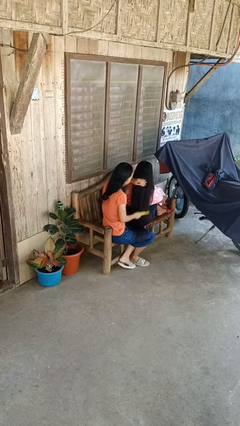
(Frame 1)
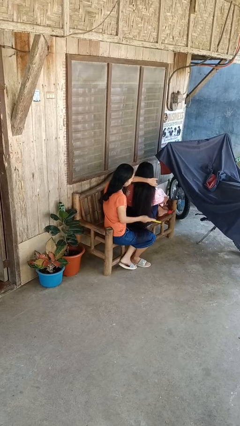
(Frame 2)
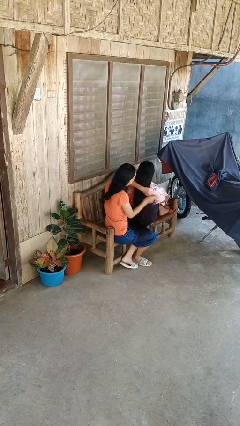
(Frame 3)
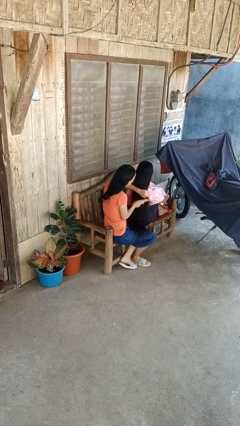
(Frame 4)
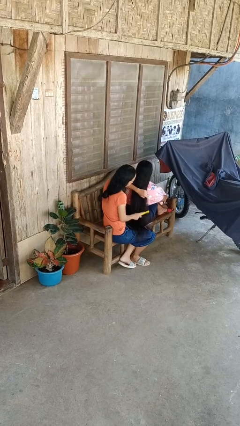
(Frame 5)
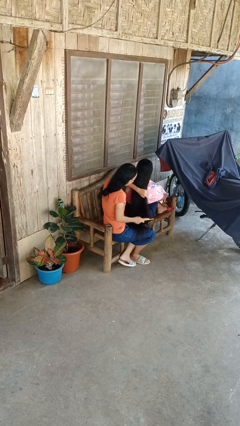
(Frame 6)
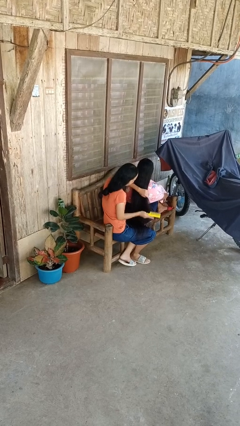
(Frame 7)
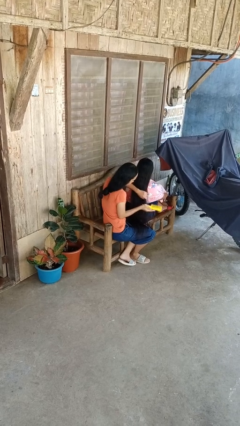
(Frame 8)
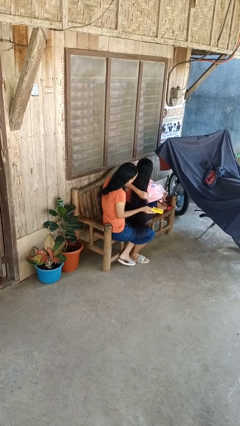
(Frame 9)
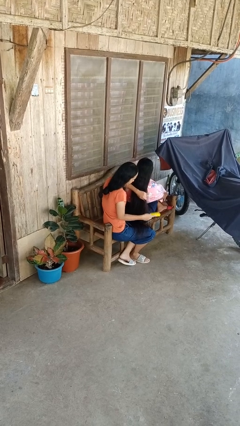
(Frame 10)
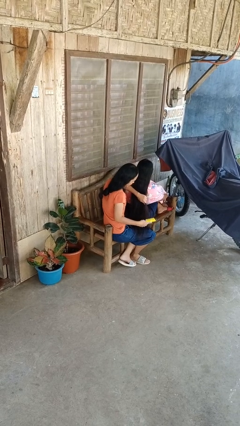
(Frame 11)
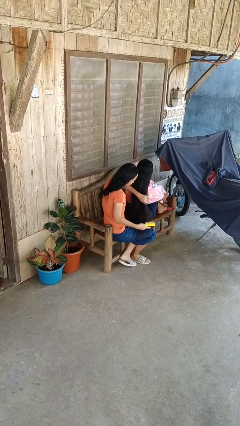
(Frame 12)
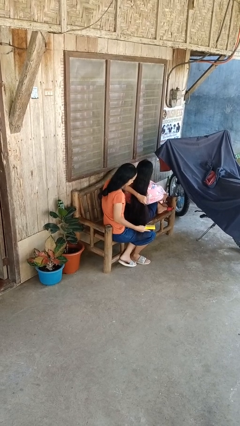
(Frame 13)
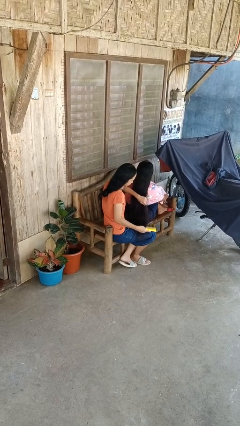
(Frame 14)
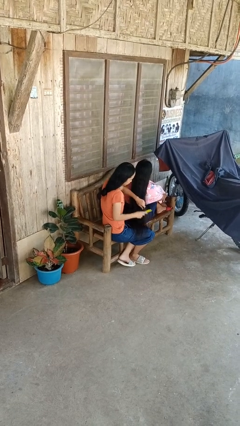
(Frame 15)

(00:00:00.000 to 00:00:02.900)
person brushes hair of person

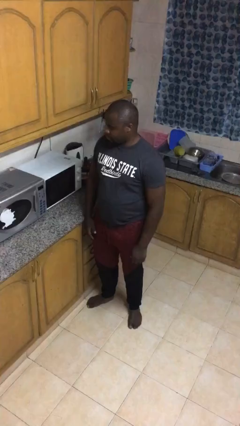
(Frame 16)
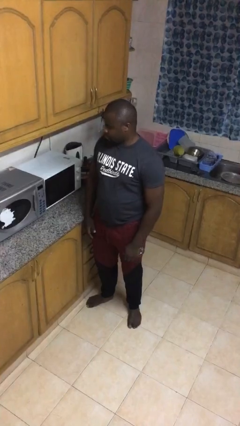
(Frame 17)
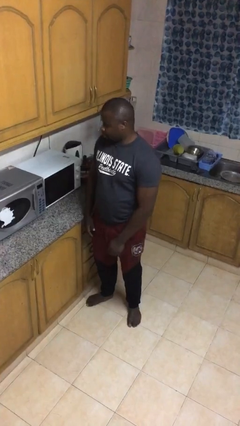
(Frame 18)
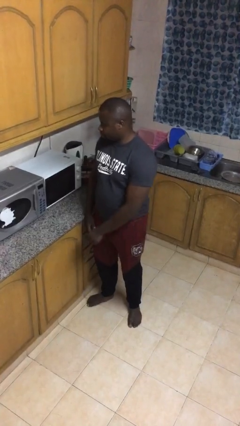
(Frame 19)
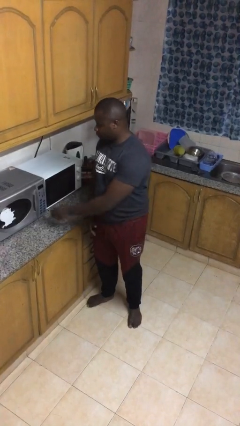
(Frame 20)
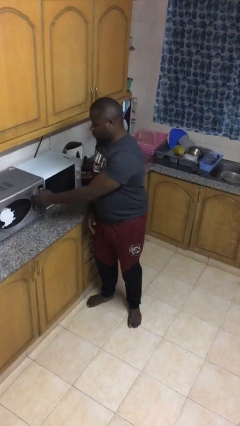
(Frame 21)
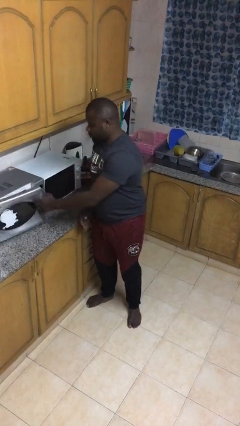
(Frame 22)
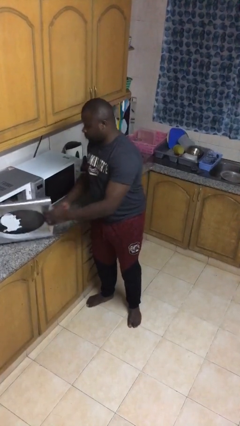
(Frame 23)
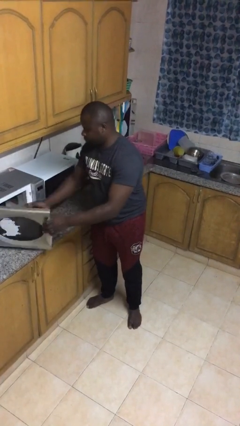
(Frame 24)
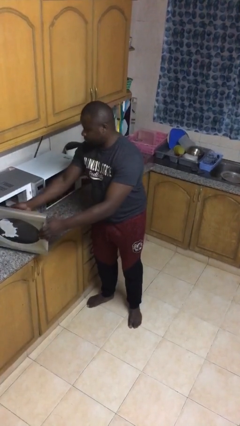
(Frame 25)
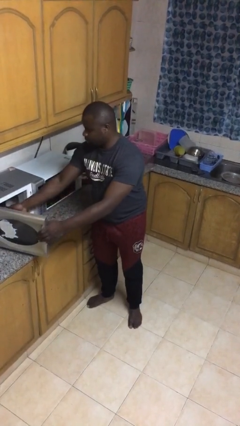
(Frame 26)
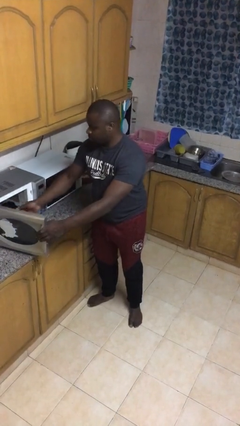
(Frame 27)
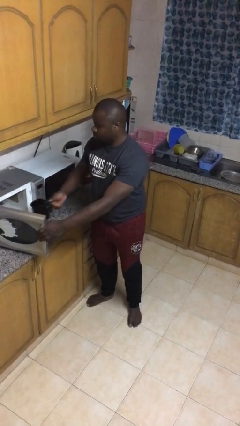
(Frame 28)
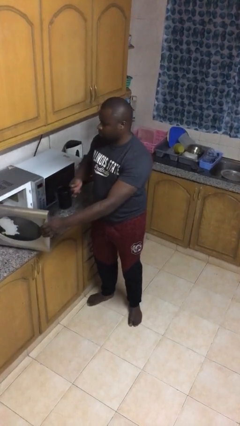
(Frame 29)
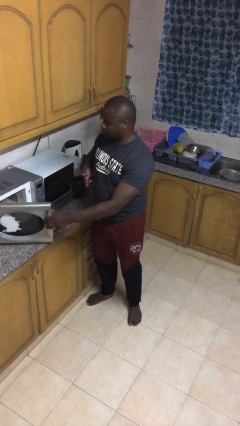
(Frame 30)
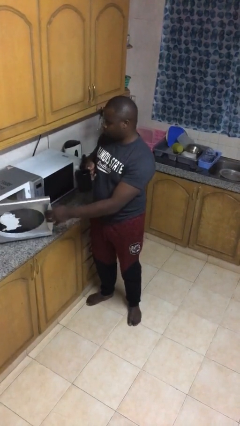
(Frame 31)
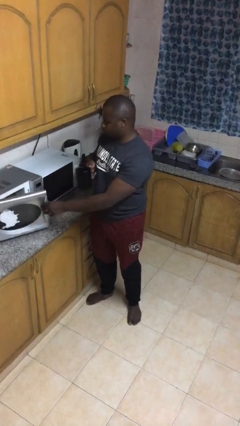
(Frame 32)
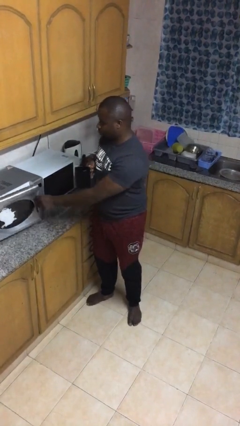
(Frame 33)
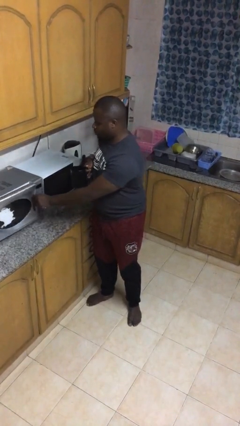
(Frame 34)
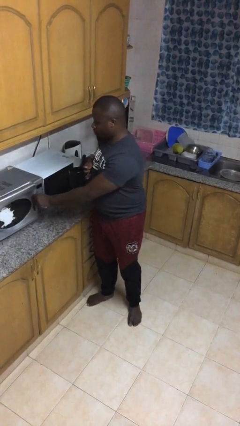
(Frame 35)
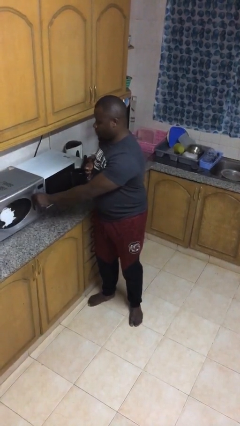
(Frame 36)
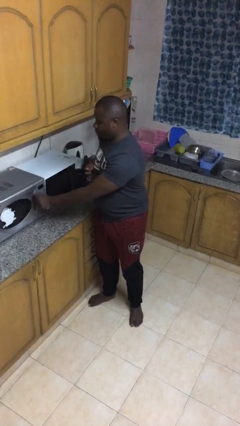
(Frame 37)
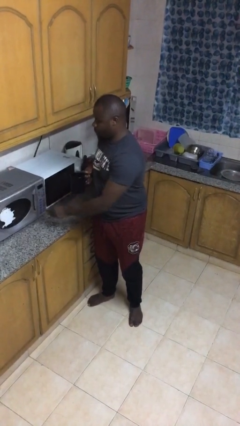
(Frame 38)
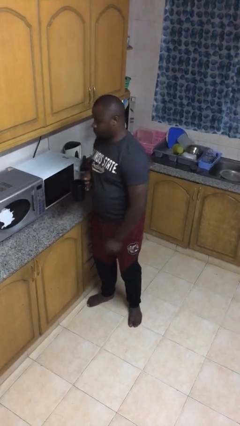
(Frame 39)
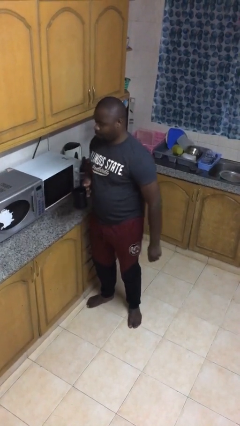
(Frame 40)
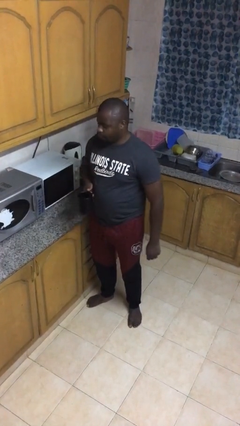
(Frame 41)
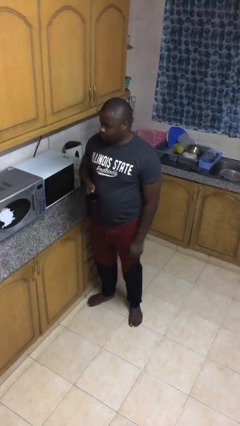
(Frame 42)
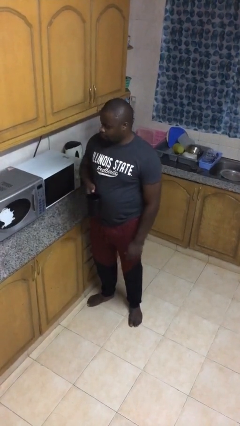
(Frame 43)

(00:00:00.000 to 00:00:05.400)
person takes object from microwave

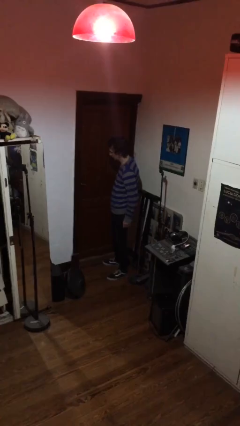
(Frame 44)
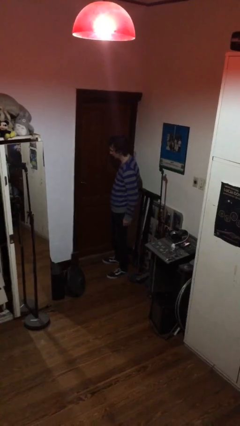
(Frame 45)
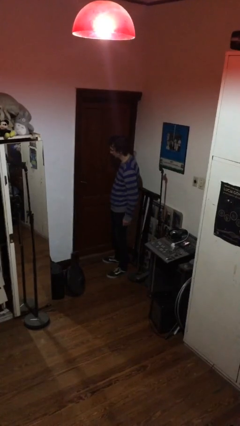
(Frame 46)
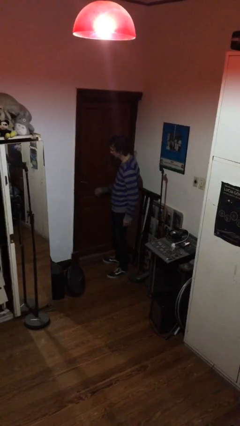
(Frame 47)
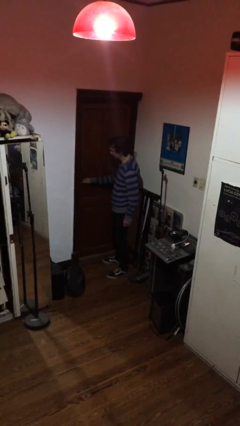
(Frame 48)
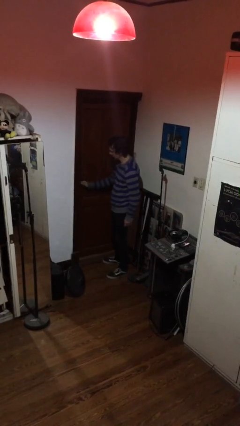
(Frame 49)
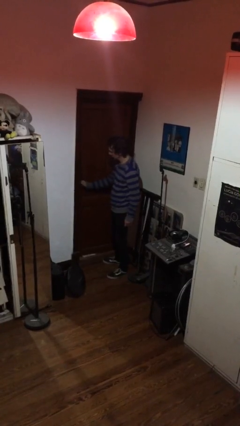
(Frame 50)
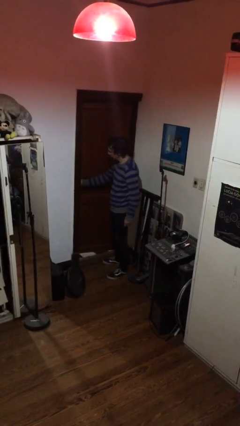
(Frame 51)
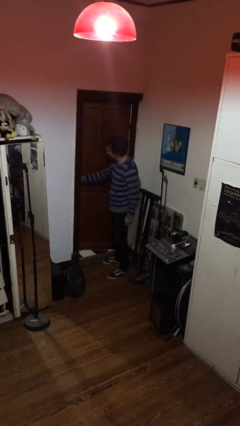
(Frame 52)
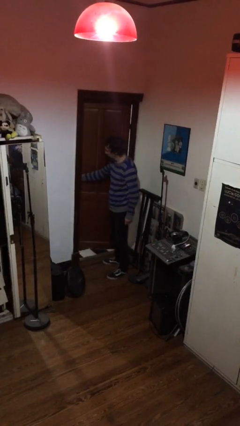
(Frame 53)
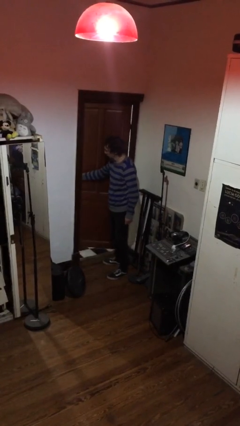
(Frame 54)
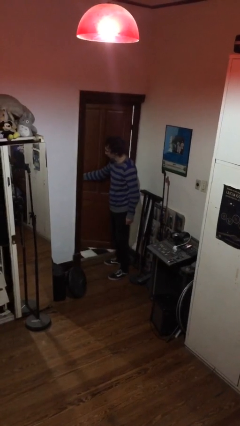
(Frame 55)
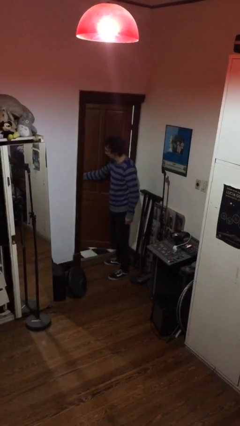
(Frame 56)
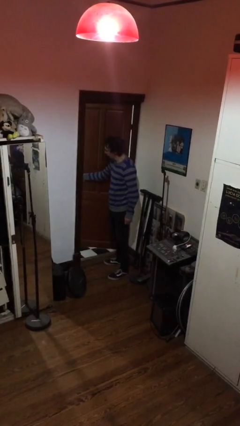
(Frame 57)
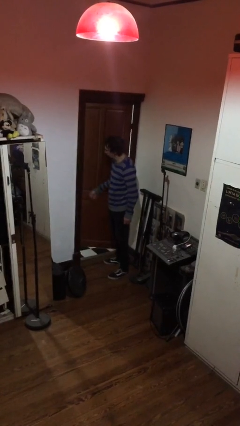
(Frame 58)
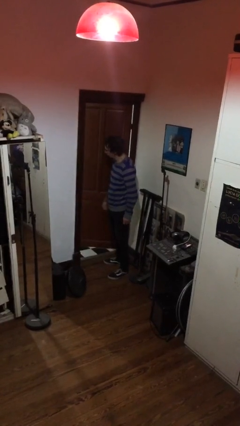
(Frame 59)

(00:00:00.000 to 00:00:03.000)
person opens facility door

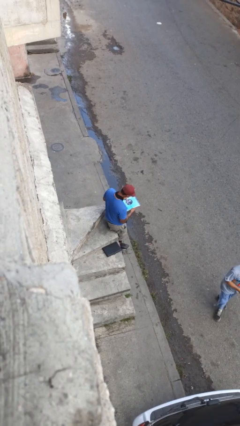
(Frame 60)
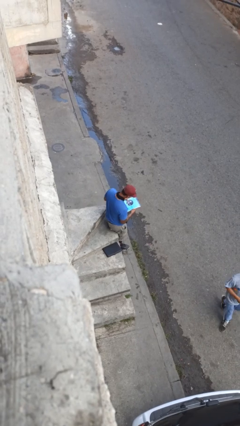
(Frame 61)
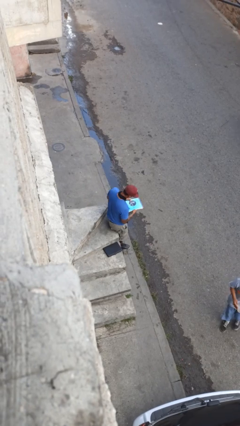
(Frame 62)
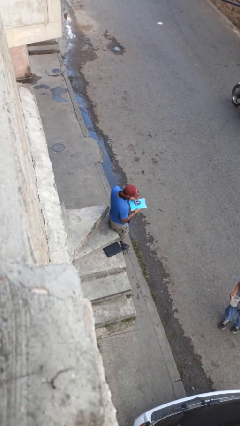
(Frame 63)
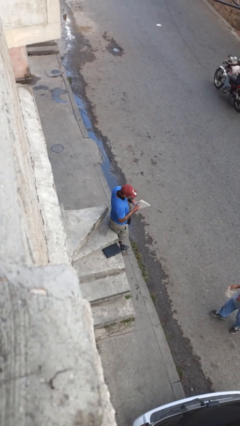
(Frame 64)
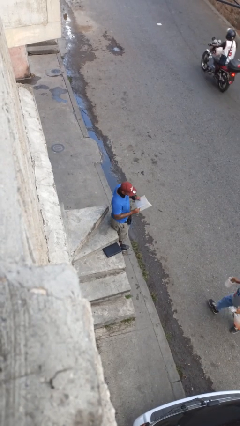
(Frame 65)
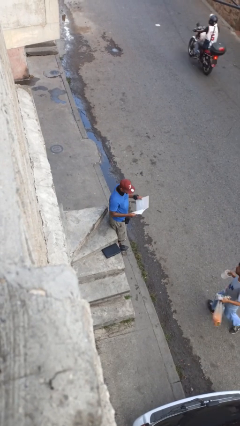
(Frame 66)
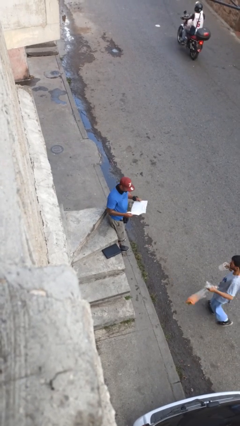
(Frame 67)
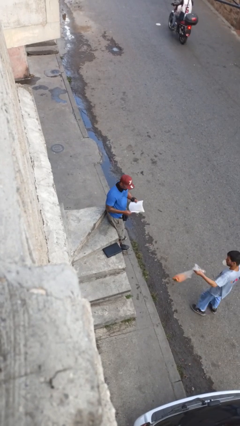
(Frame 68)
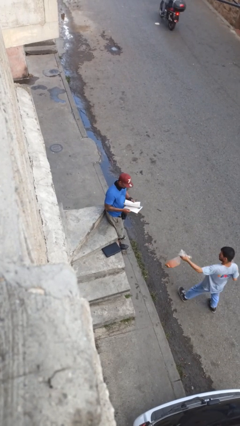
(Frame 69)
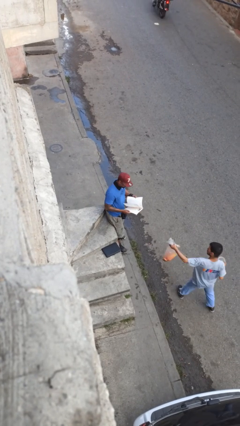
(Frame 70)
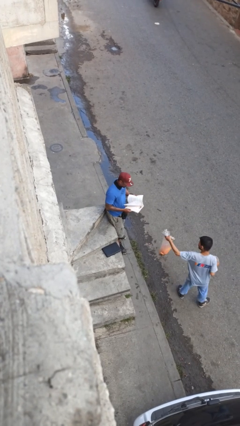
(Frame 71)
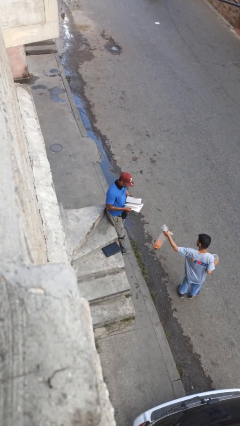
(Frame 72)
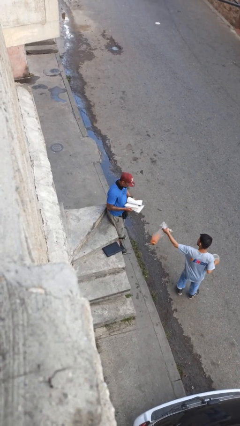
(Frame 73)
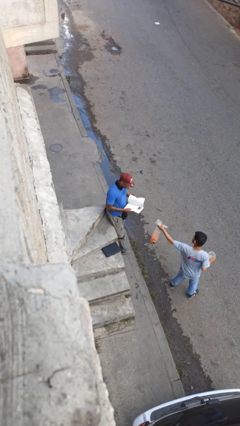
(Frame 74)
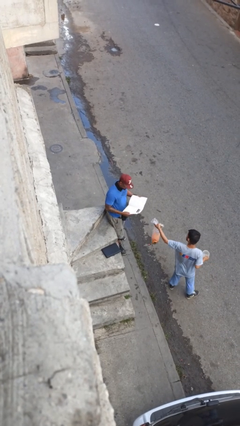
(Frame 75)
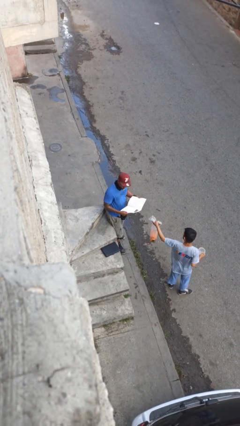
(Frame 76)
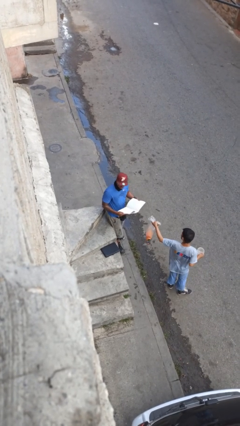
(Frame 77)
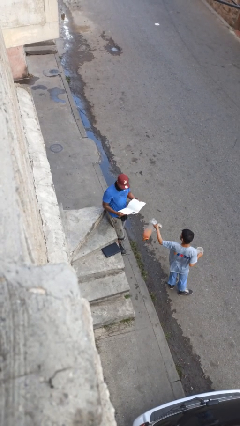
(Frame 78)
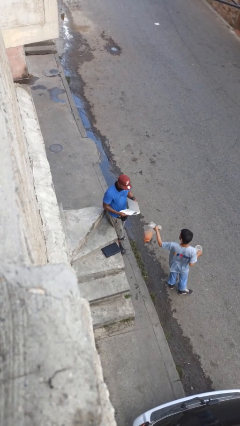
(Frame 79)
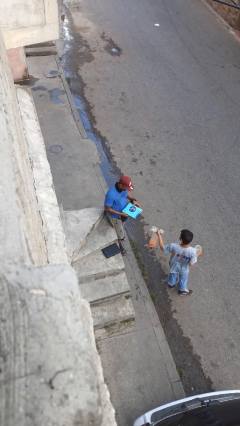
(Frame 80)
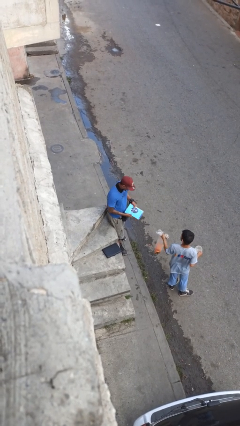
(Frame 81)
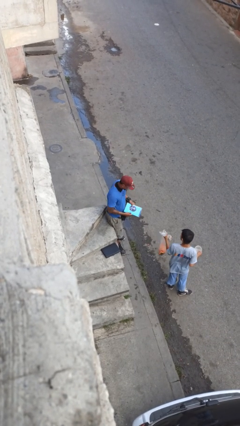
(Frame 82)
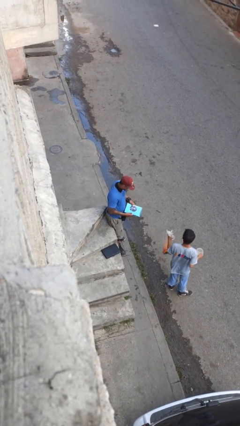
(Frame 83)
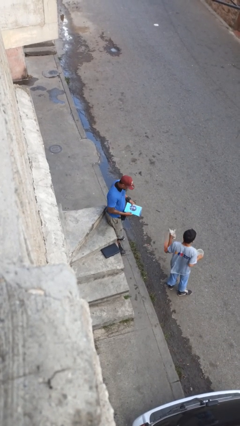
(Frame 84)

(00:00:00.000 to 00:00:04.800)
person reads document

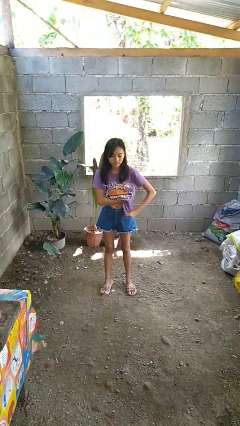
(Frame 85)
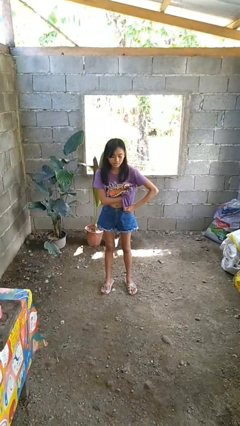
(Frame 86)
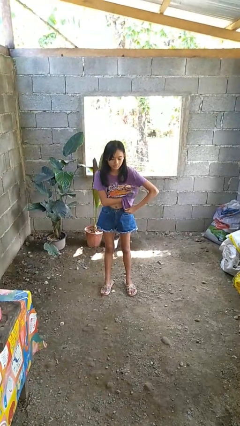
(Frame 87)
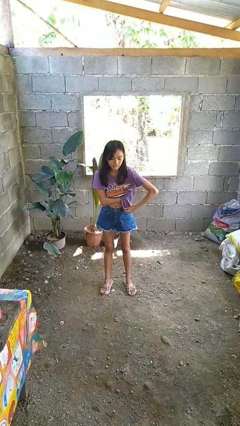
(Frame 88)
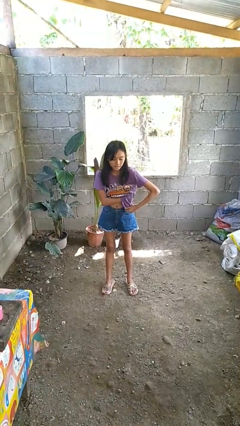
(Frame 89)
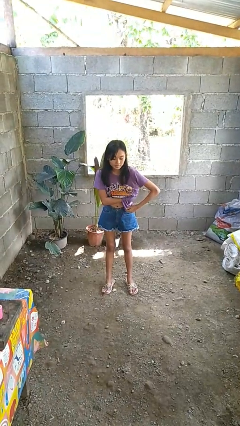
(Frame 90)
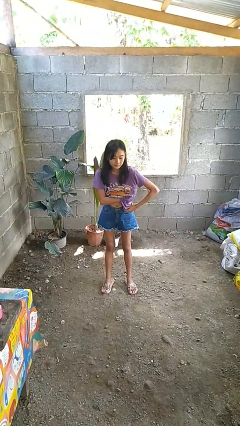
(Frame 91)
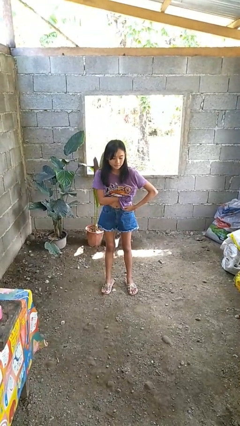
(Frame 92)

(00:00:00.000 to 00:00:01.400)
person applies deodorant

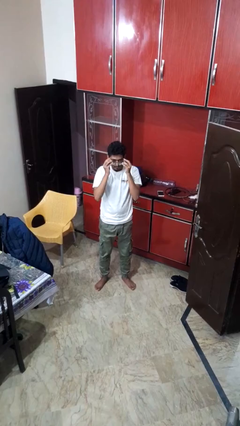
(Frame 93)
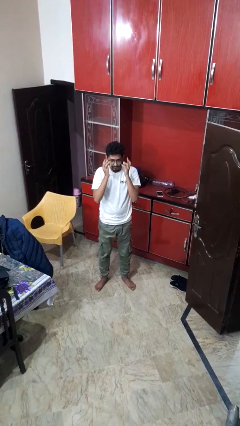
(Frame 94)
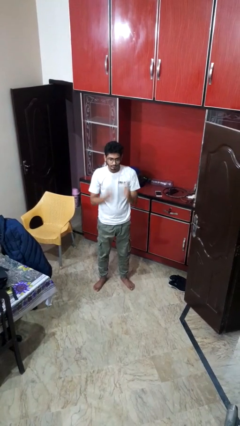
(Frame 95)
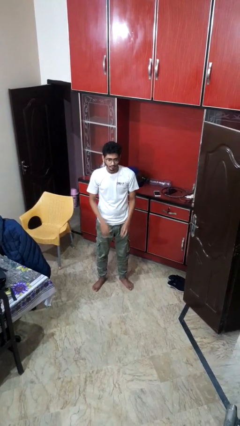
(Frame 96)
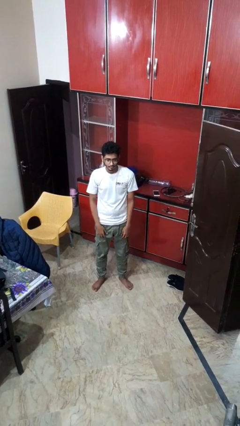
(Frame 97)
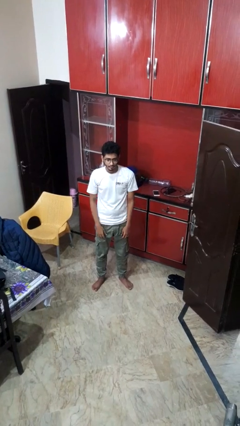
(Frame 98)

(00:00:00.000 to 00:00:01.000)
person puts on glasses
